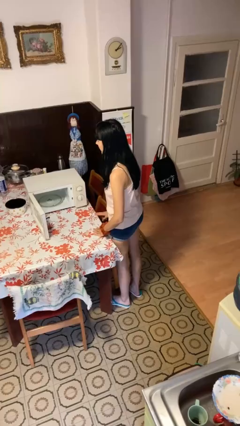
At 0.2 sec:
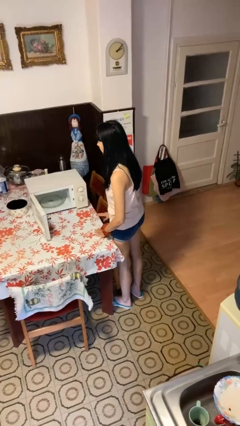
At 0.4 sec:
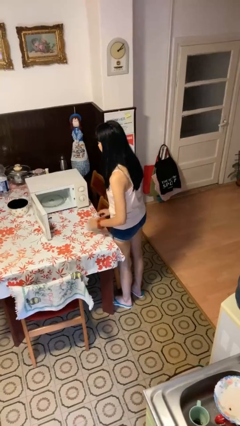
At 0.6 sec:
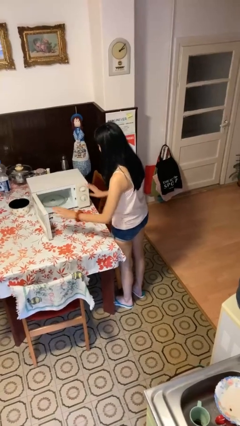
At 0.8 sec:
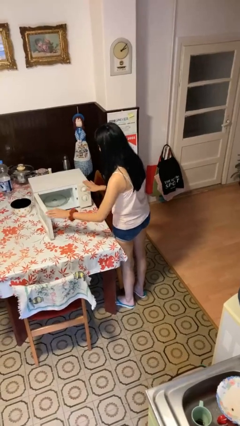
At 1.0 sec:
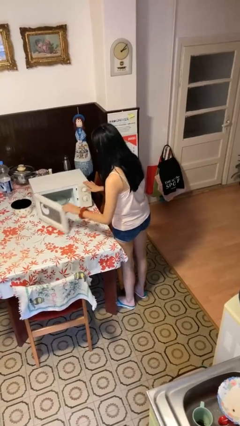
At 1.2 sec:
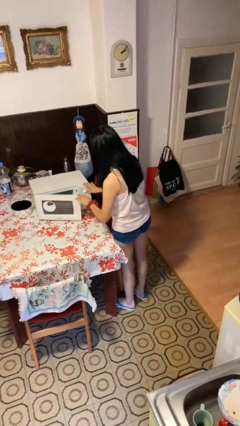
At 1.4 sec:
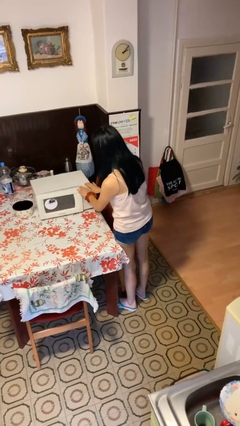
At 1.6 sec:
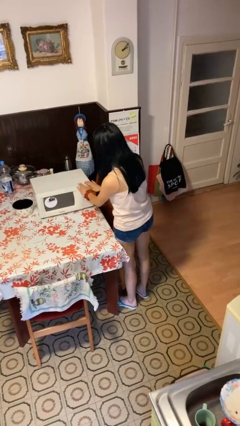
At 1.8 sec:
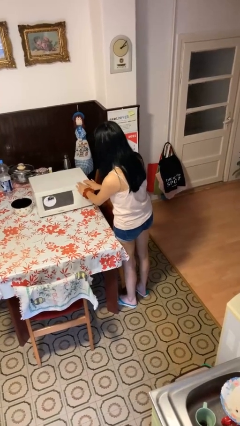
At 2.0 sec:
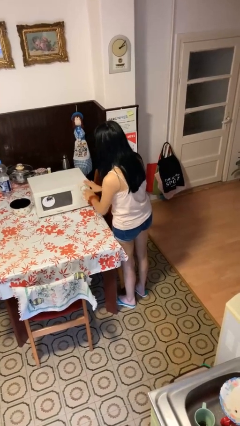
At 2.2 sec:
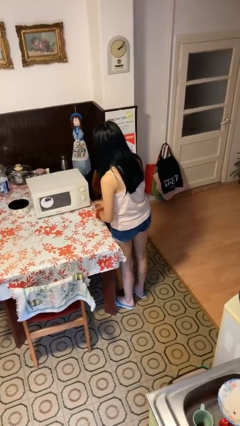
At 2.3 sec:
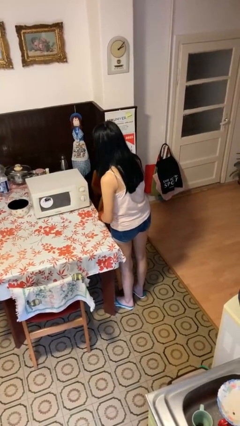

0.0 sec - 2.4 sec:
person closes microwave

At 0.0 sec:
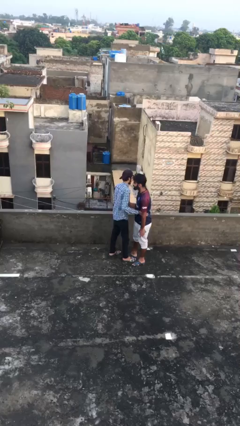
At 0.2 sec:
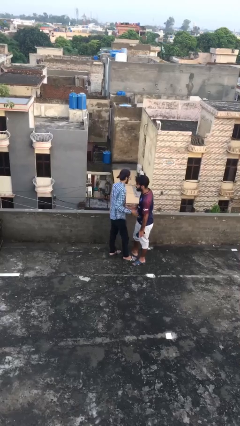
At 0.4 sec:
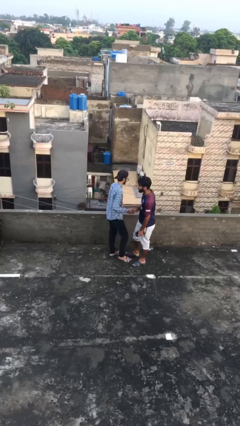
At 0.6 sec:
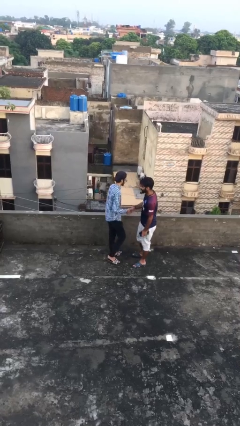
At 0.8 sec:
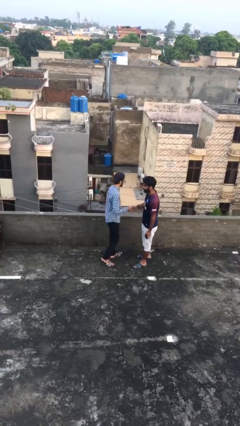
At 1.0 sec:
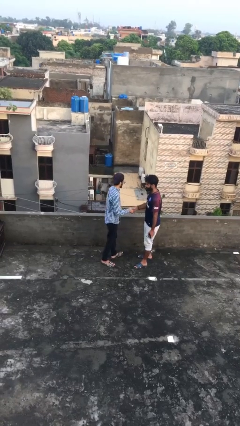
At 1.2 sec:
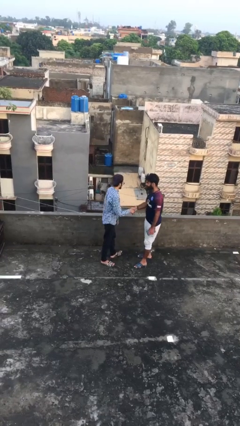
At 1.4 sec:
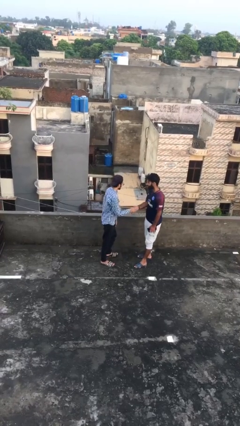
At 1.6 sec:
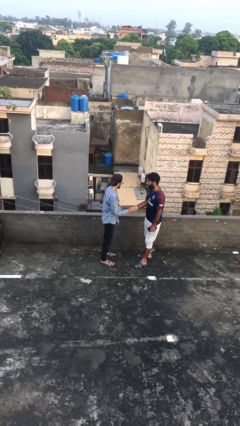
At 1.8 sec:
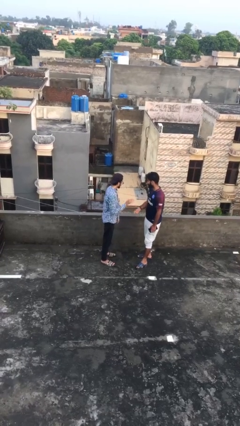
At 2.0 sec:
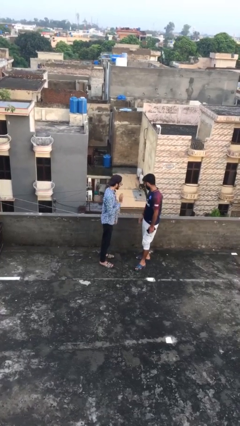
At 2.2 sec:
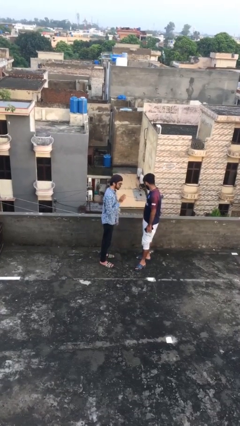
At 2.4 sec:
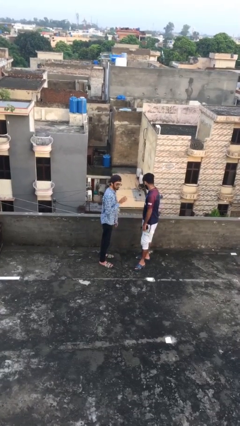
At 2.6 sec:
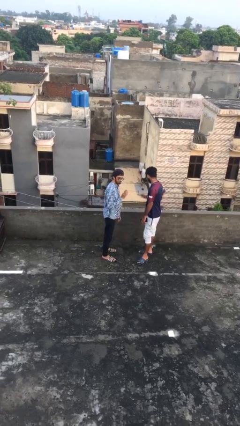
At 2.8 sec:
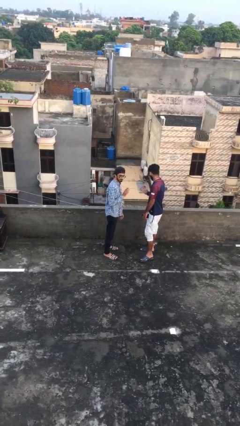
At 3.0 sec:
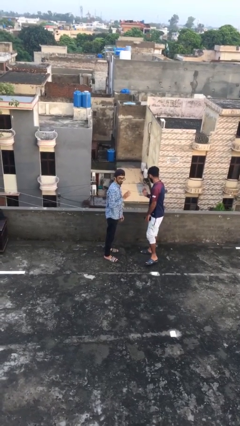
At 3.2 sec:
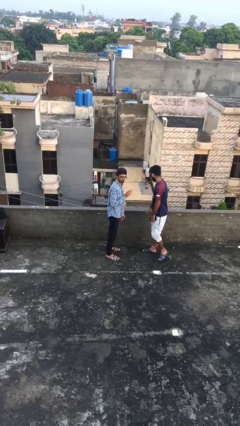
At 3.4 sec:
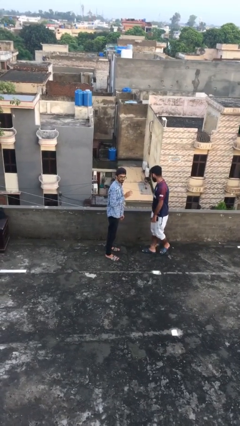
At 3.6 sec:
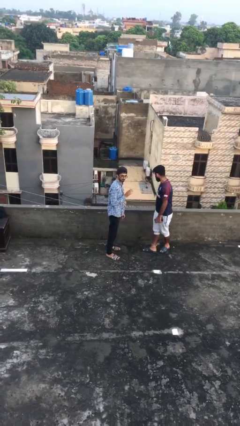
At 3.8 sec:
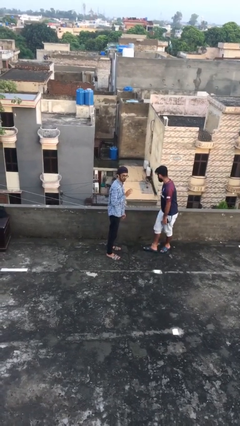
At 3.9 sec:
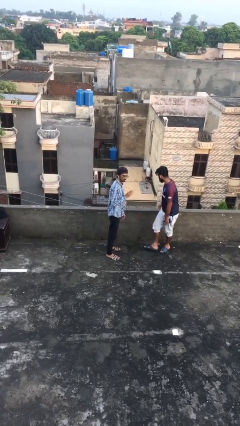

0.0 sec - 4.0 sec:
person talks to person

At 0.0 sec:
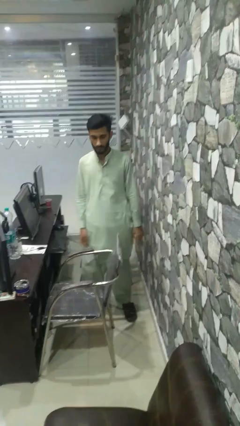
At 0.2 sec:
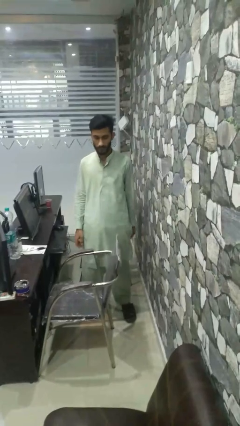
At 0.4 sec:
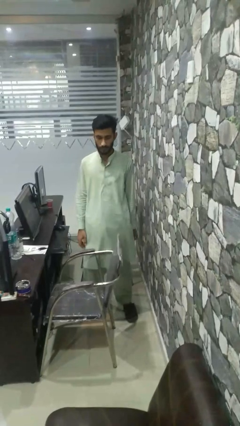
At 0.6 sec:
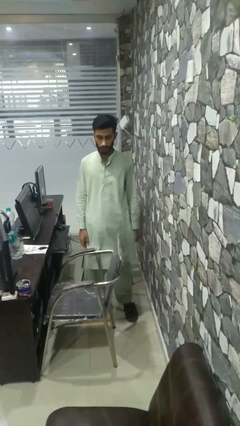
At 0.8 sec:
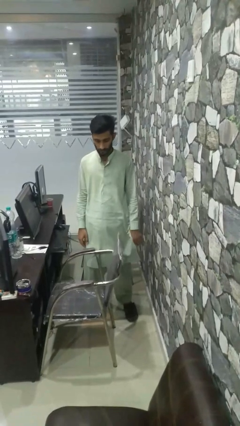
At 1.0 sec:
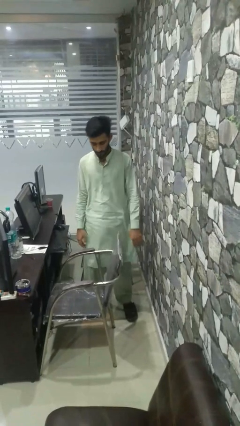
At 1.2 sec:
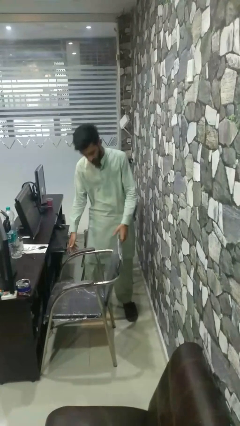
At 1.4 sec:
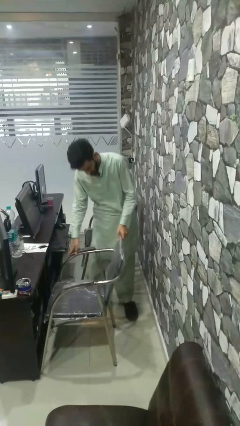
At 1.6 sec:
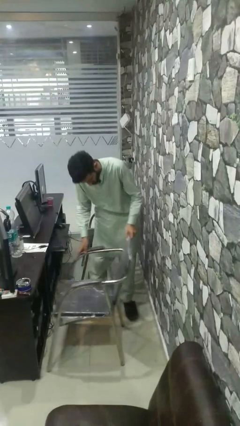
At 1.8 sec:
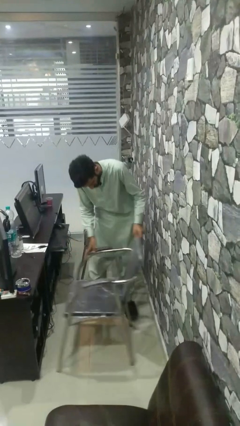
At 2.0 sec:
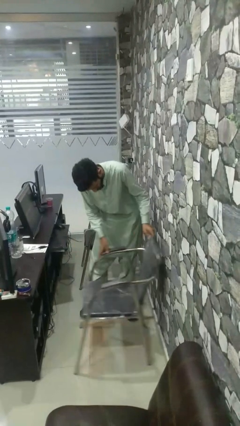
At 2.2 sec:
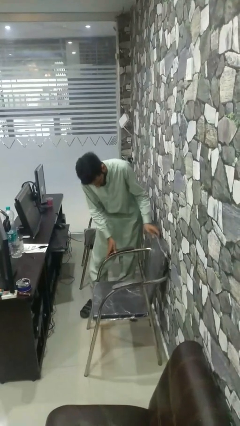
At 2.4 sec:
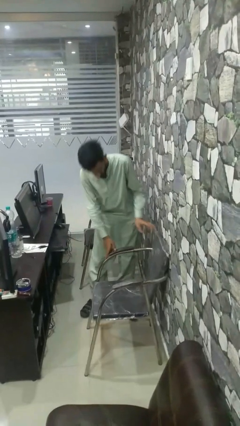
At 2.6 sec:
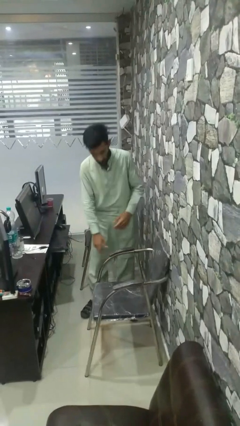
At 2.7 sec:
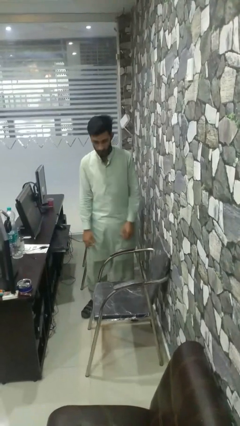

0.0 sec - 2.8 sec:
person pulls out chair

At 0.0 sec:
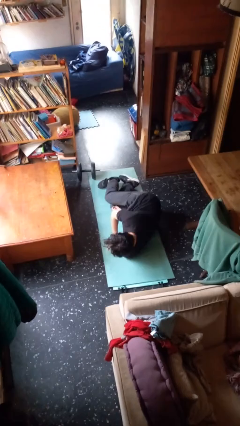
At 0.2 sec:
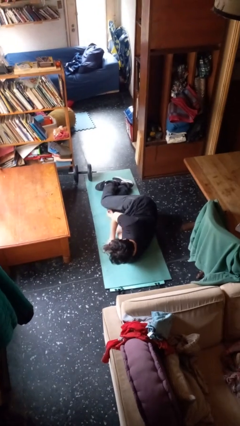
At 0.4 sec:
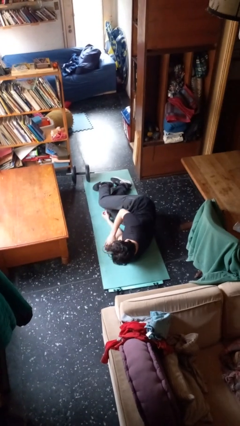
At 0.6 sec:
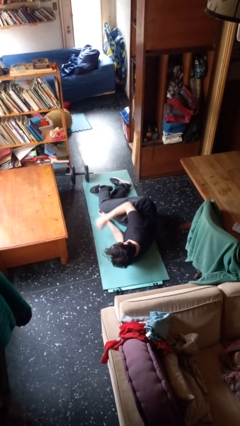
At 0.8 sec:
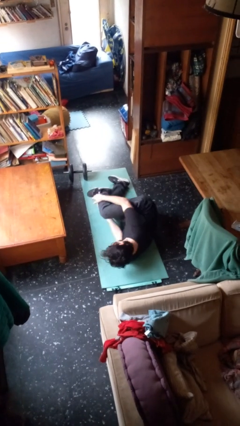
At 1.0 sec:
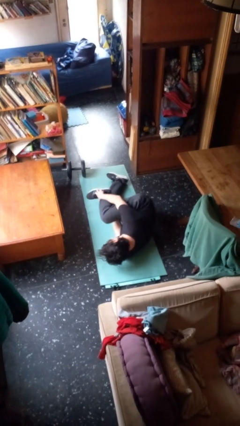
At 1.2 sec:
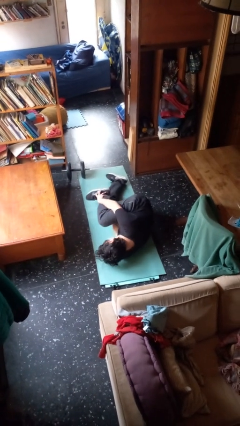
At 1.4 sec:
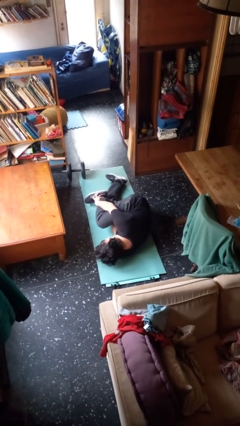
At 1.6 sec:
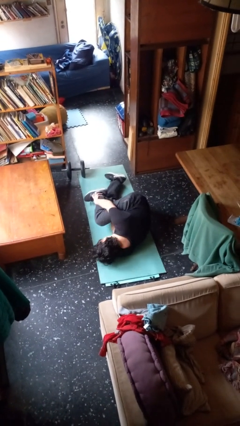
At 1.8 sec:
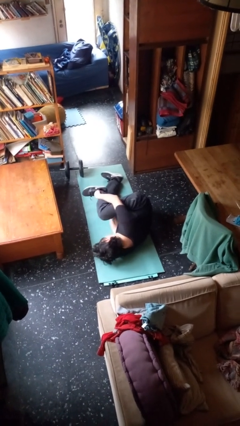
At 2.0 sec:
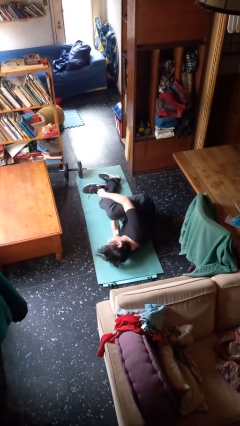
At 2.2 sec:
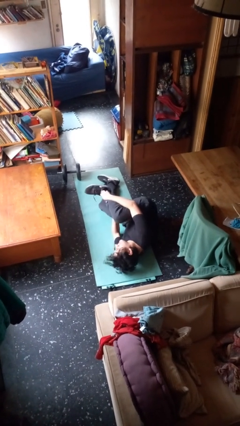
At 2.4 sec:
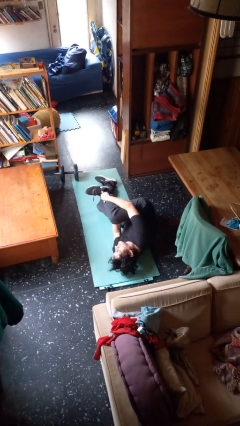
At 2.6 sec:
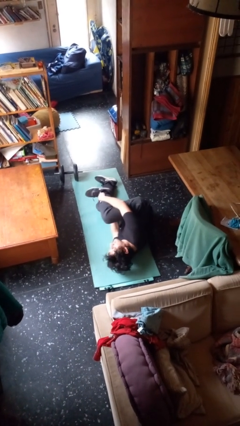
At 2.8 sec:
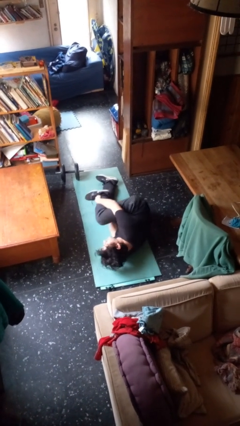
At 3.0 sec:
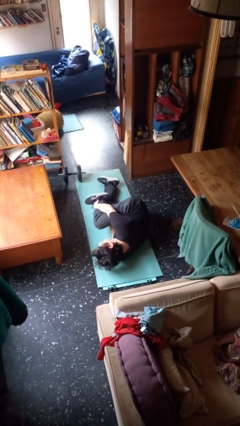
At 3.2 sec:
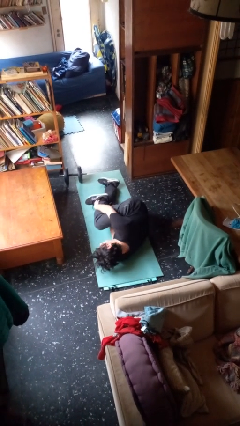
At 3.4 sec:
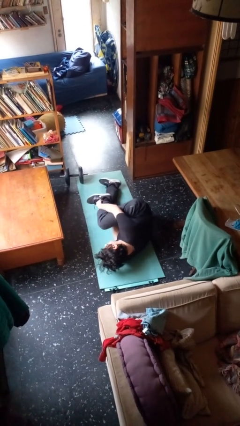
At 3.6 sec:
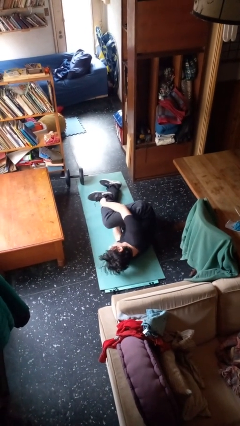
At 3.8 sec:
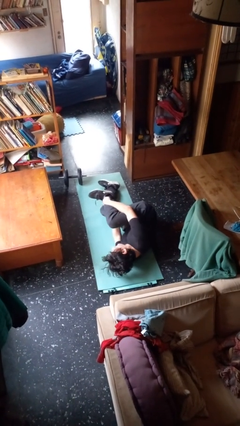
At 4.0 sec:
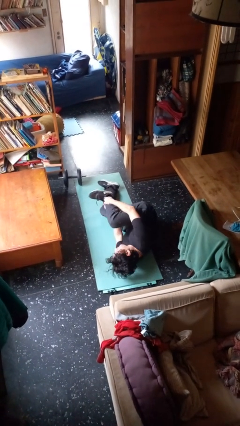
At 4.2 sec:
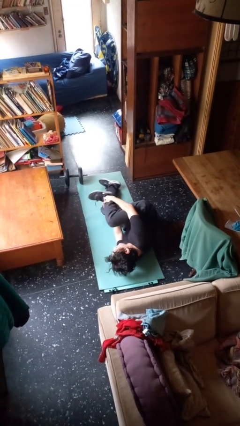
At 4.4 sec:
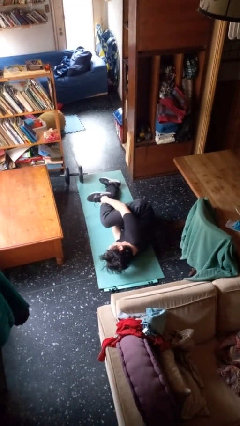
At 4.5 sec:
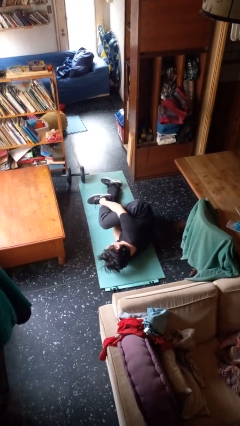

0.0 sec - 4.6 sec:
person lies down on floor

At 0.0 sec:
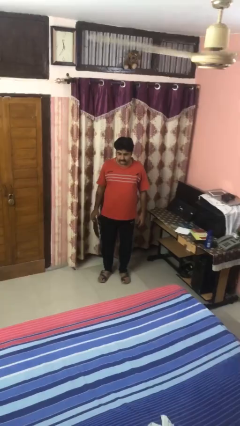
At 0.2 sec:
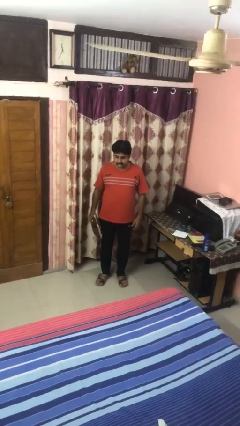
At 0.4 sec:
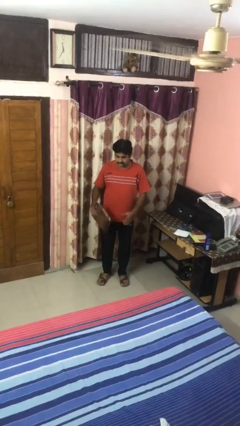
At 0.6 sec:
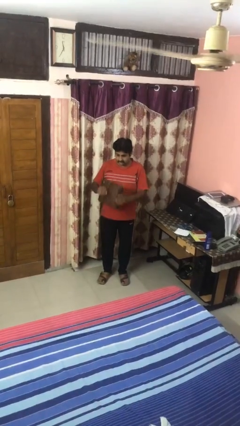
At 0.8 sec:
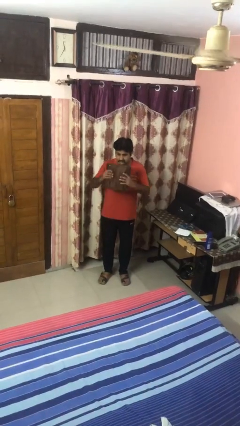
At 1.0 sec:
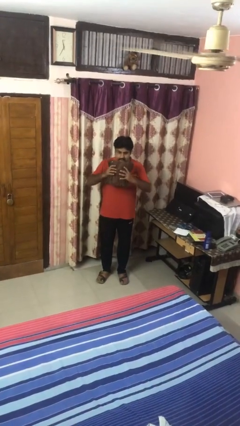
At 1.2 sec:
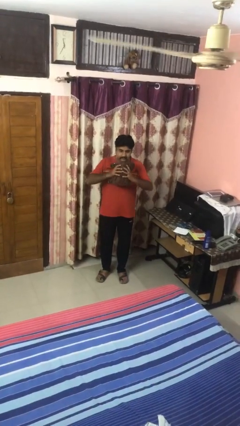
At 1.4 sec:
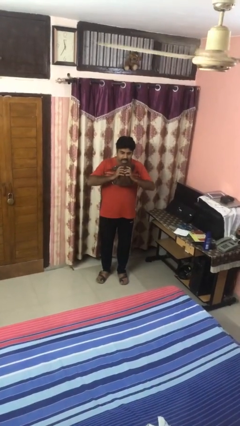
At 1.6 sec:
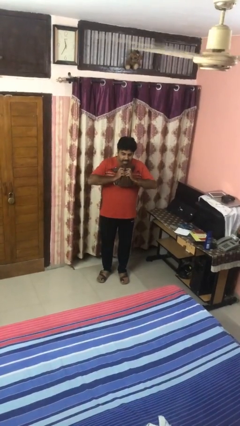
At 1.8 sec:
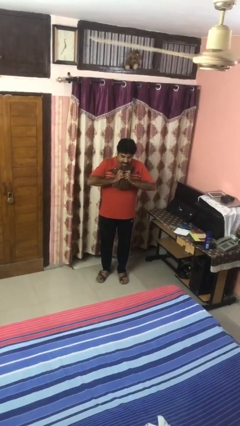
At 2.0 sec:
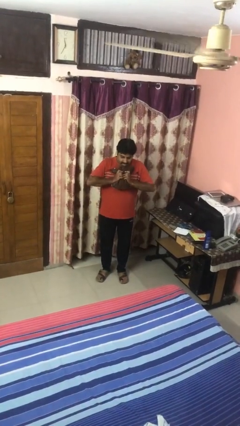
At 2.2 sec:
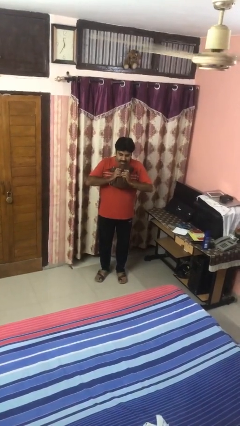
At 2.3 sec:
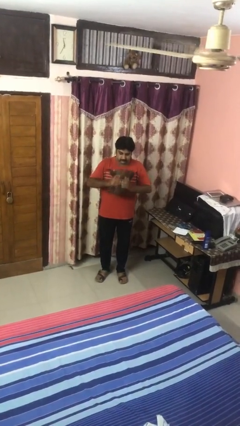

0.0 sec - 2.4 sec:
person squeezes object

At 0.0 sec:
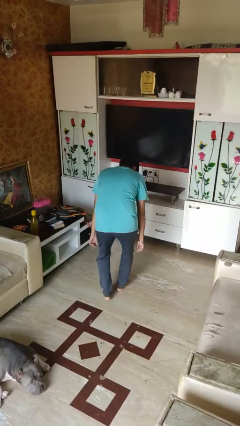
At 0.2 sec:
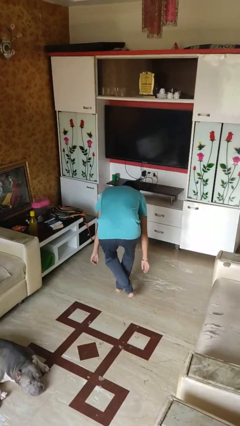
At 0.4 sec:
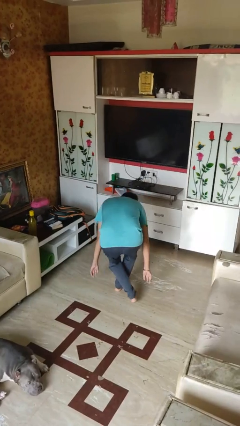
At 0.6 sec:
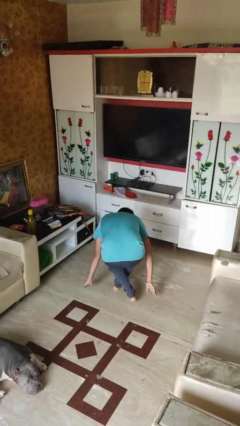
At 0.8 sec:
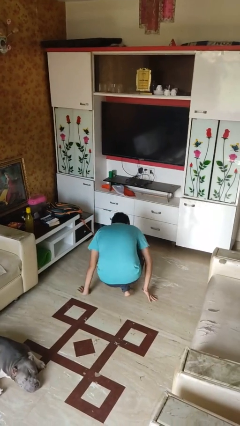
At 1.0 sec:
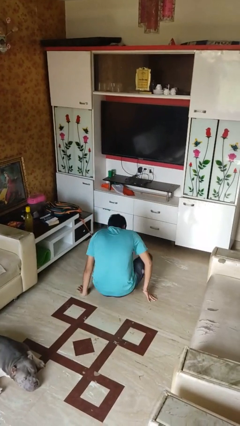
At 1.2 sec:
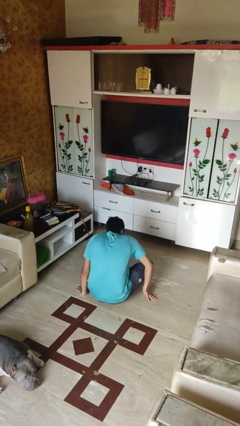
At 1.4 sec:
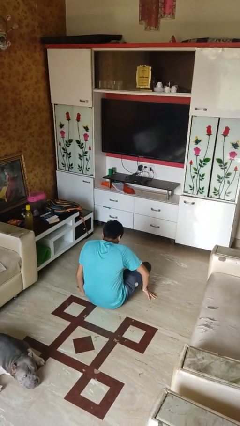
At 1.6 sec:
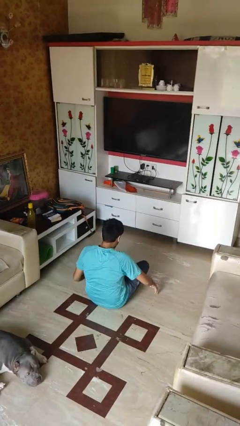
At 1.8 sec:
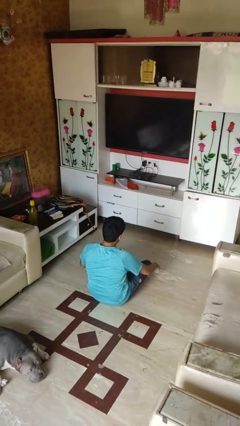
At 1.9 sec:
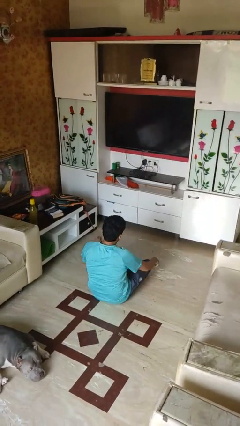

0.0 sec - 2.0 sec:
person sits crisscross